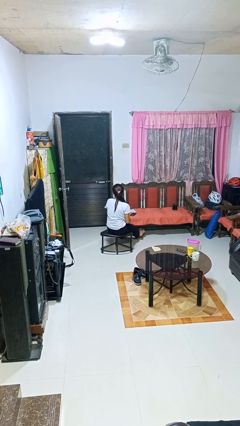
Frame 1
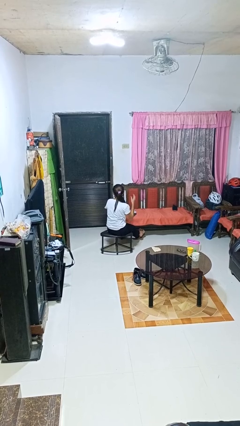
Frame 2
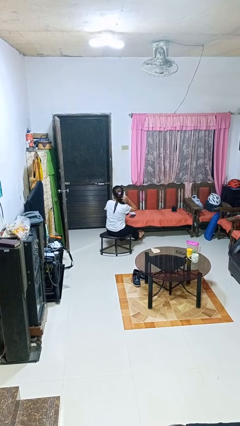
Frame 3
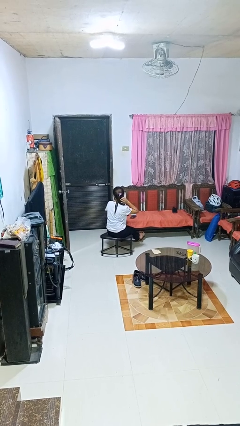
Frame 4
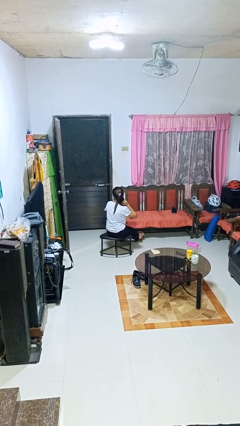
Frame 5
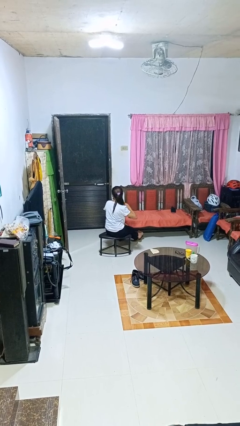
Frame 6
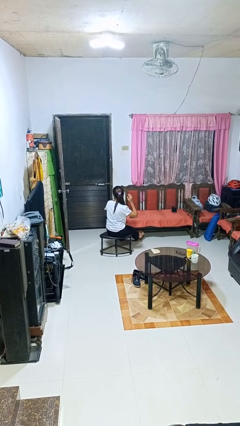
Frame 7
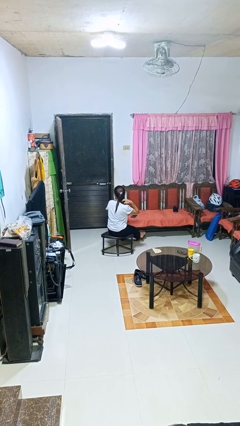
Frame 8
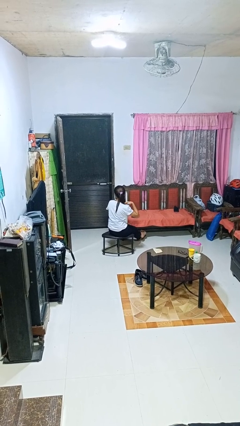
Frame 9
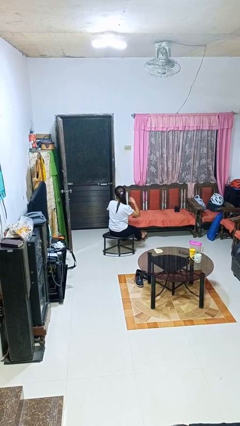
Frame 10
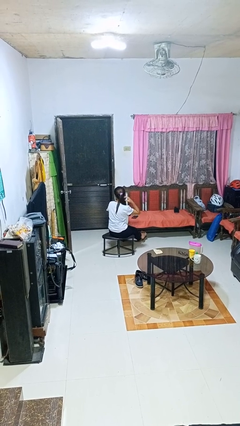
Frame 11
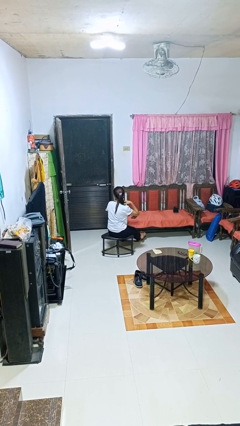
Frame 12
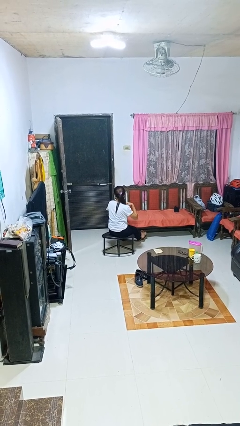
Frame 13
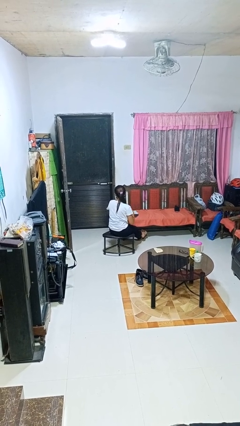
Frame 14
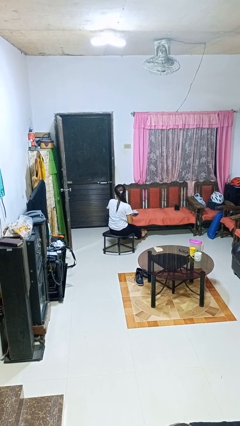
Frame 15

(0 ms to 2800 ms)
person strokes hair

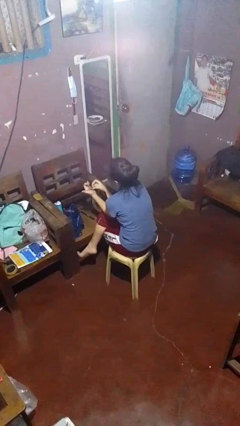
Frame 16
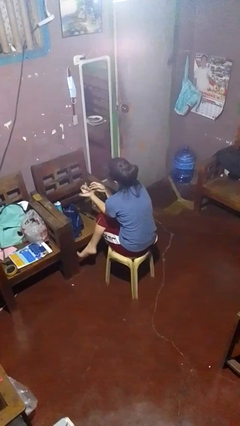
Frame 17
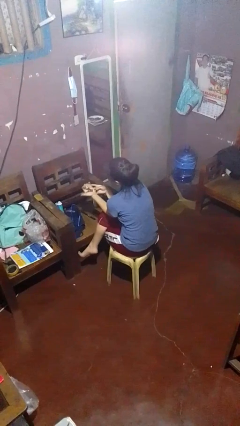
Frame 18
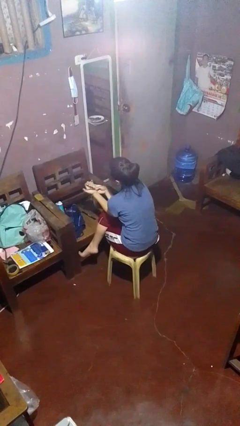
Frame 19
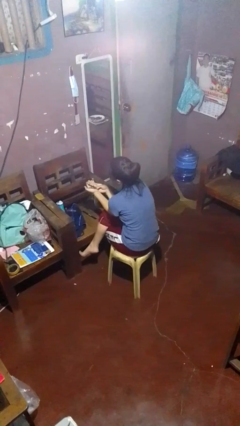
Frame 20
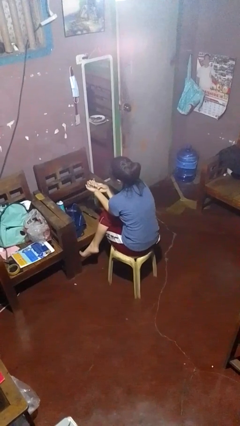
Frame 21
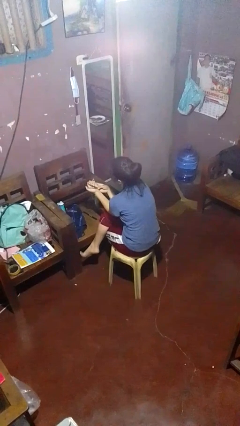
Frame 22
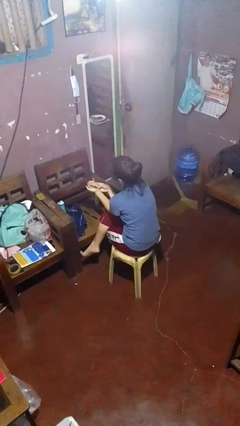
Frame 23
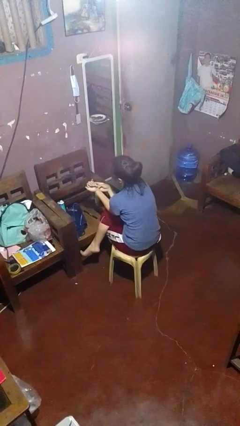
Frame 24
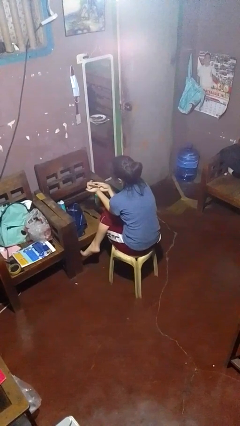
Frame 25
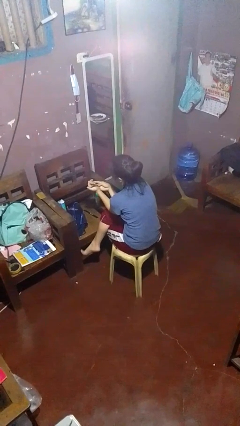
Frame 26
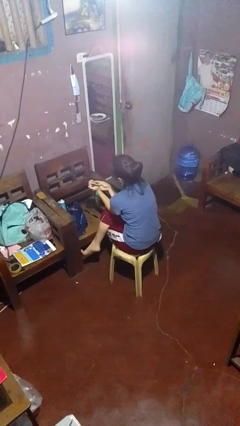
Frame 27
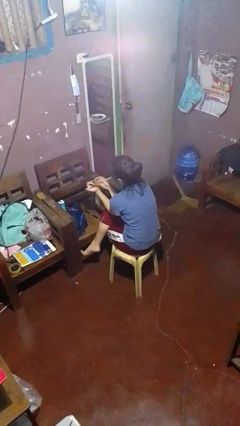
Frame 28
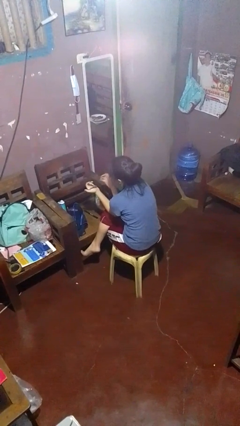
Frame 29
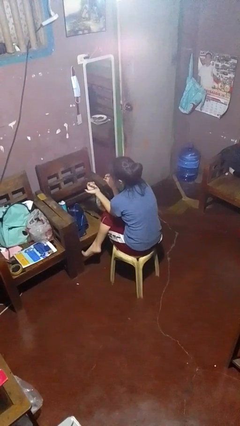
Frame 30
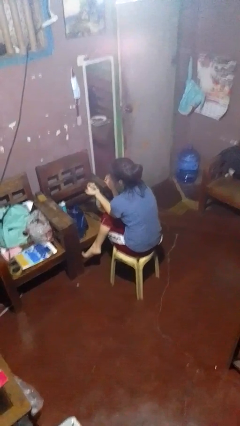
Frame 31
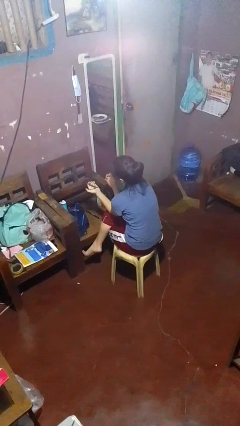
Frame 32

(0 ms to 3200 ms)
person clips fingernails

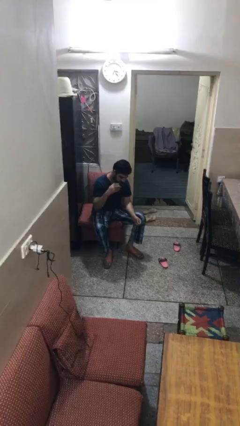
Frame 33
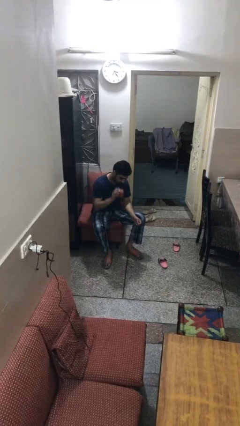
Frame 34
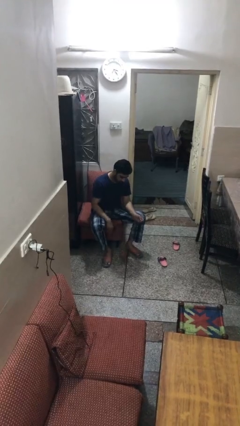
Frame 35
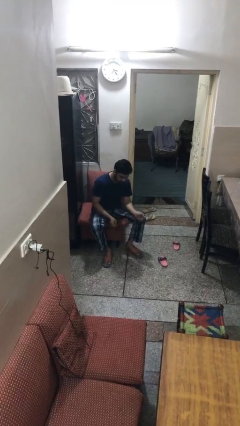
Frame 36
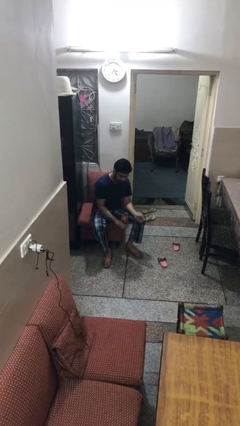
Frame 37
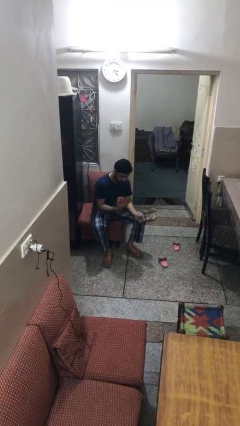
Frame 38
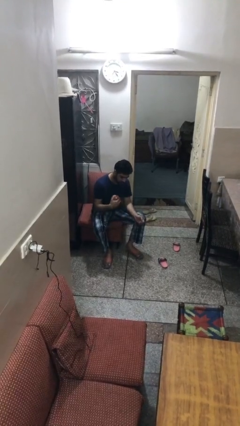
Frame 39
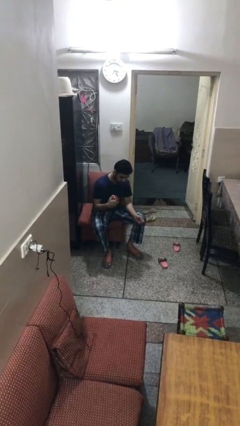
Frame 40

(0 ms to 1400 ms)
person bounces ball on floor

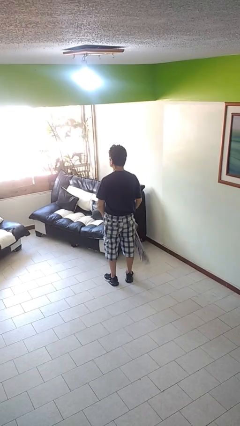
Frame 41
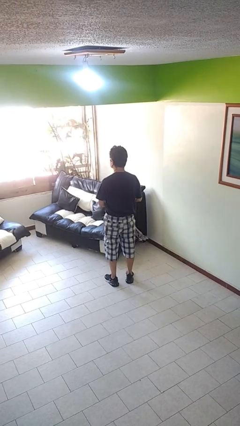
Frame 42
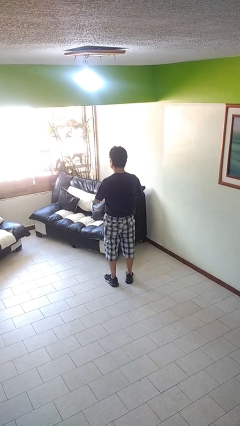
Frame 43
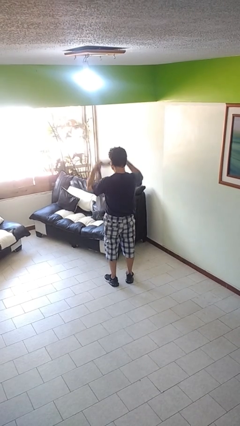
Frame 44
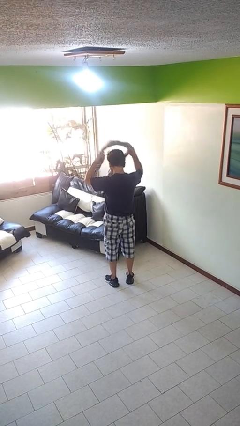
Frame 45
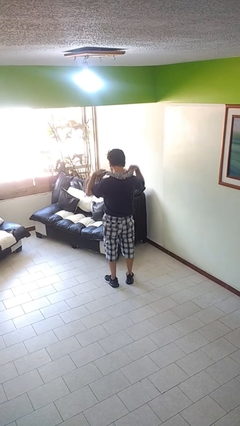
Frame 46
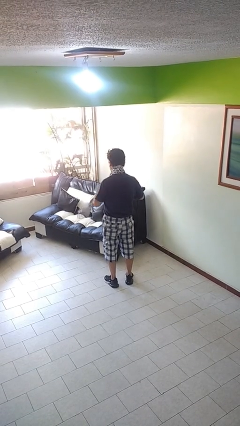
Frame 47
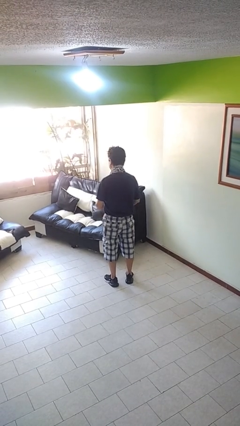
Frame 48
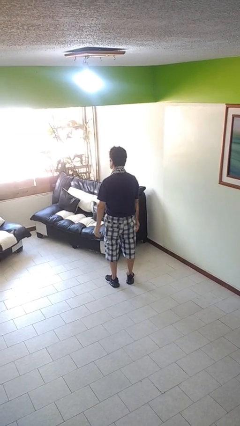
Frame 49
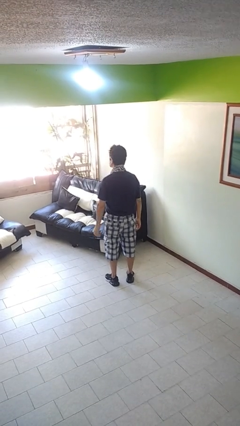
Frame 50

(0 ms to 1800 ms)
person puts on scarf

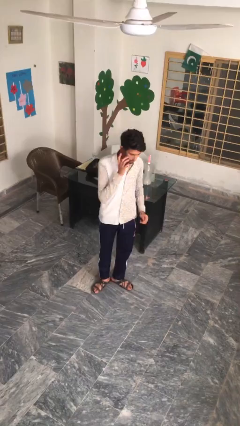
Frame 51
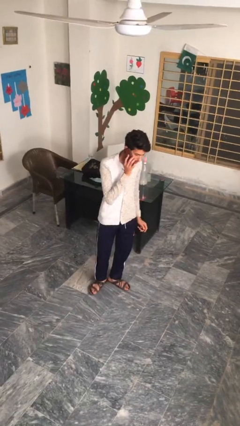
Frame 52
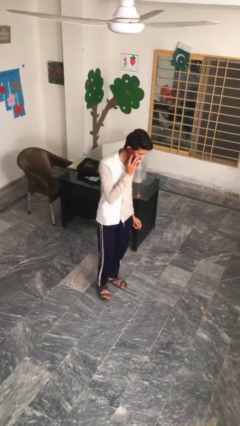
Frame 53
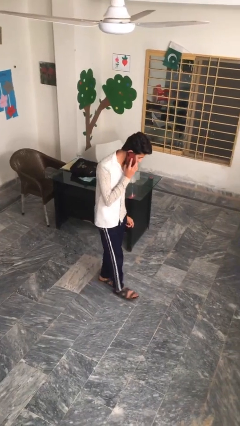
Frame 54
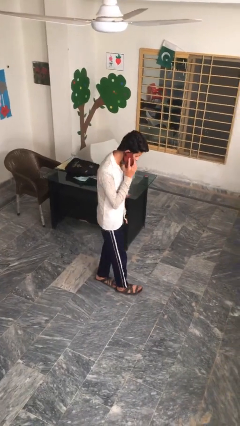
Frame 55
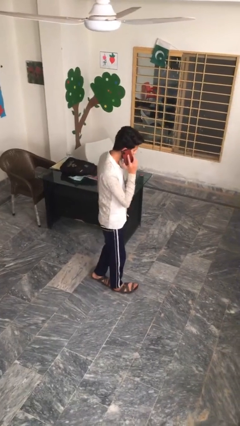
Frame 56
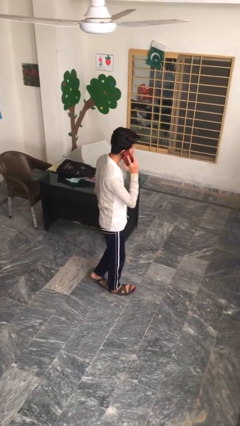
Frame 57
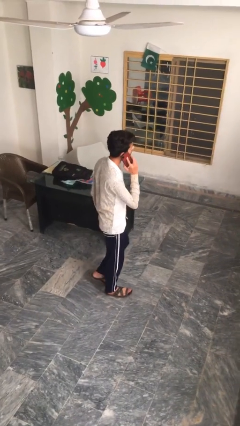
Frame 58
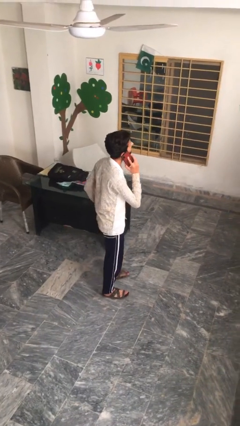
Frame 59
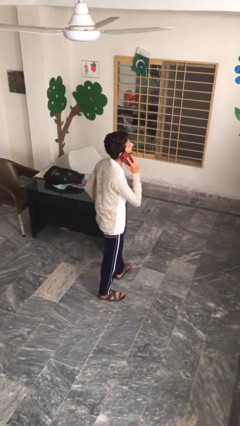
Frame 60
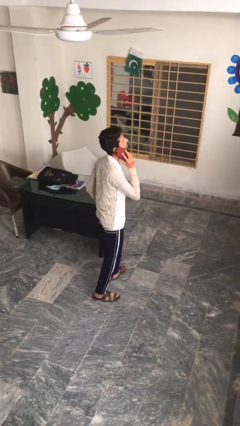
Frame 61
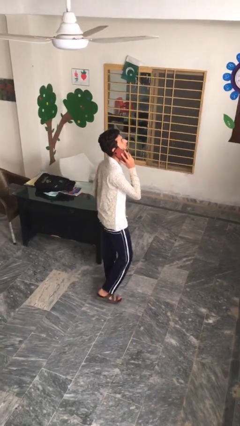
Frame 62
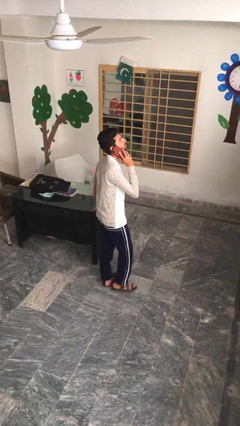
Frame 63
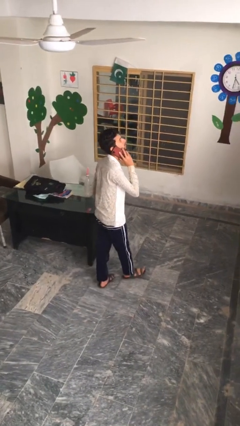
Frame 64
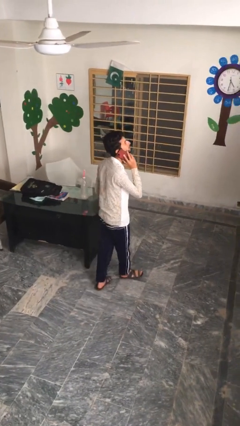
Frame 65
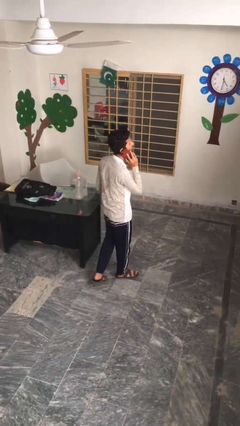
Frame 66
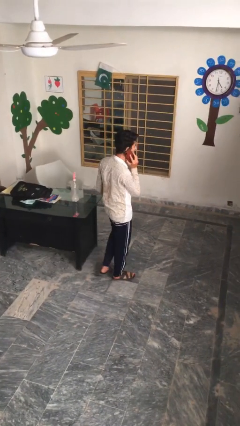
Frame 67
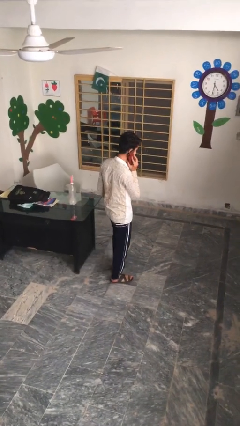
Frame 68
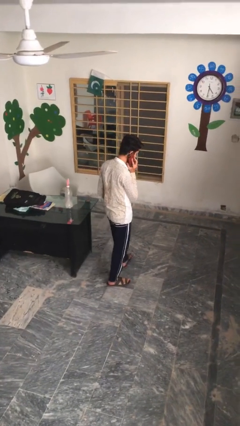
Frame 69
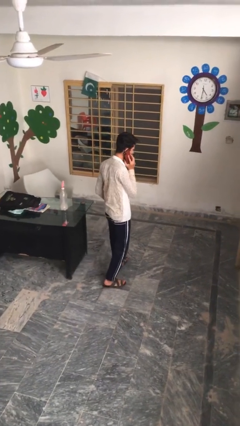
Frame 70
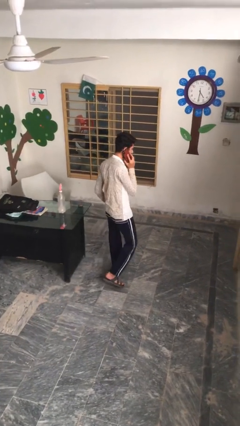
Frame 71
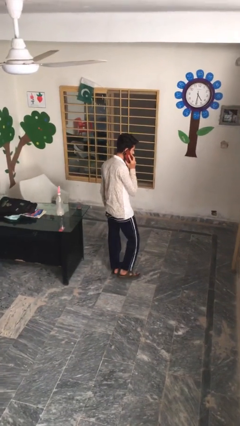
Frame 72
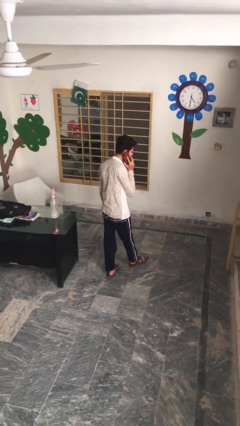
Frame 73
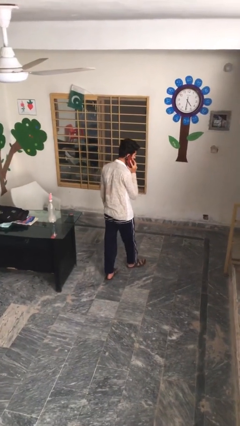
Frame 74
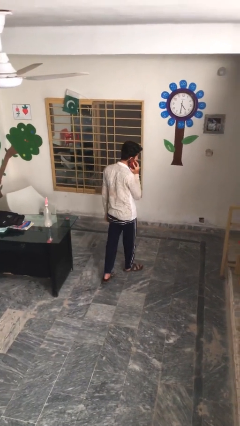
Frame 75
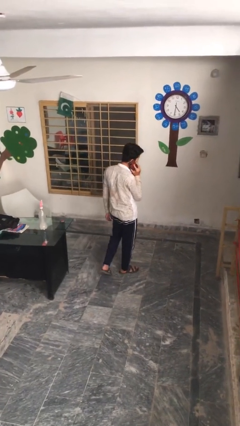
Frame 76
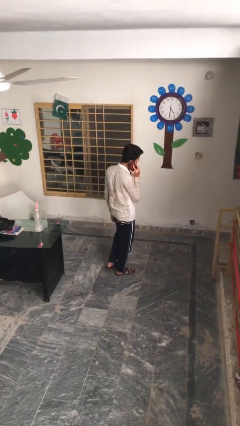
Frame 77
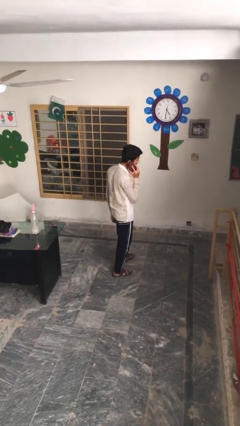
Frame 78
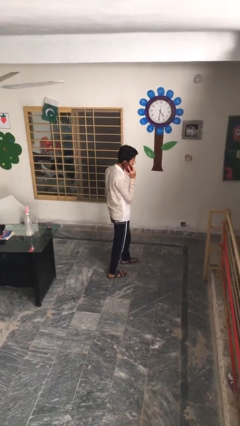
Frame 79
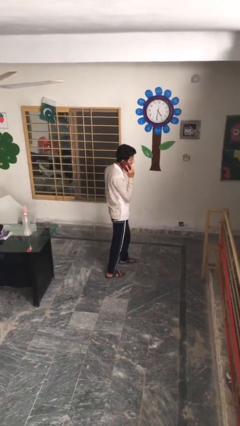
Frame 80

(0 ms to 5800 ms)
person talks on phone

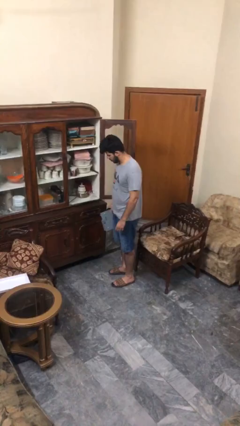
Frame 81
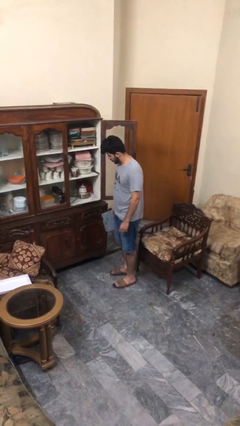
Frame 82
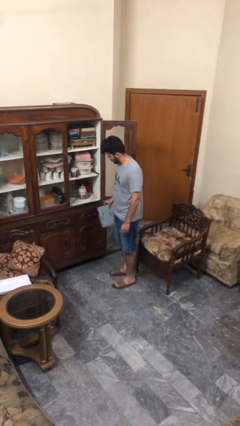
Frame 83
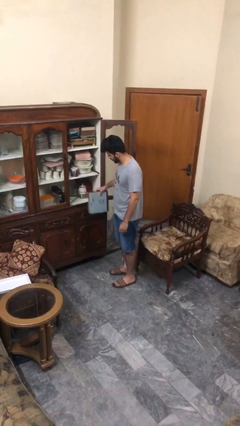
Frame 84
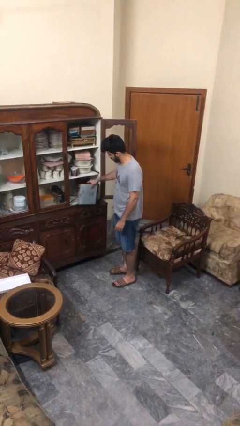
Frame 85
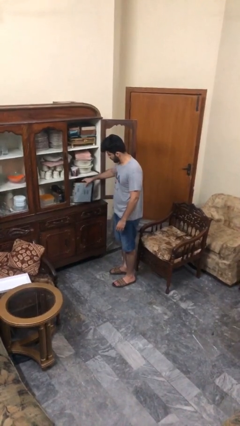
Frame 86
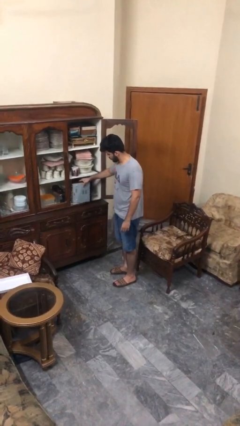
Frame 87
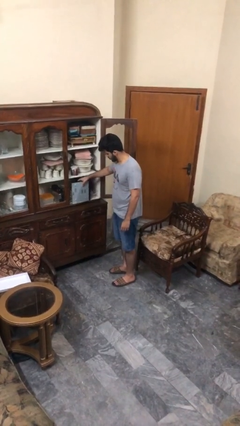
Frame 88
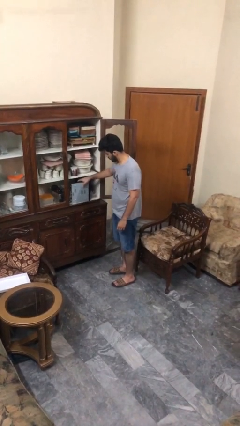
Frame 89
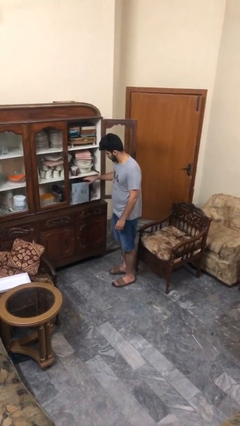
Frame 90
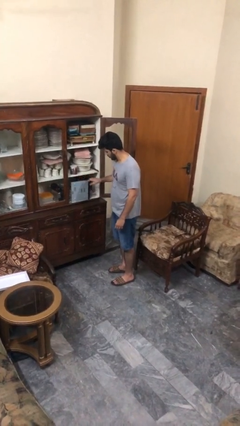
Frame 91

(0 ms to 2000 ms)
person puts down object into cabinet

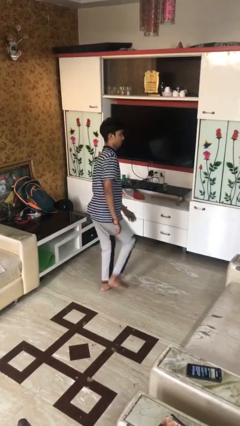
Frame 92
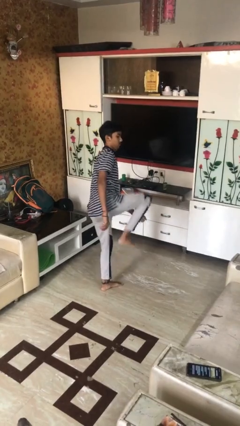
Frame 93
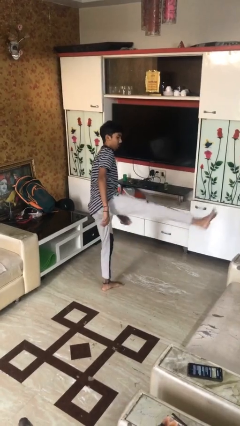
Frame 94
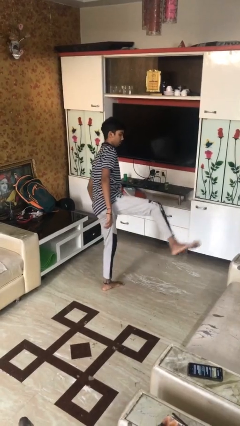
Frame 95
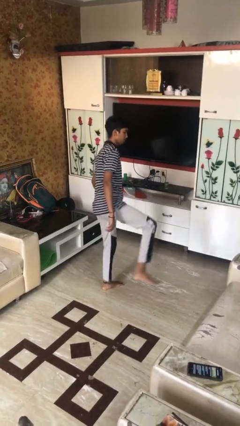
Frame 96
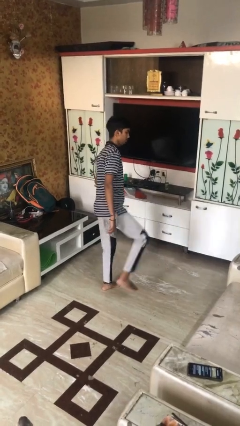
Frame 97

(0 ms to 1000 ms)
person karate kicks
